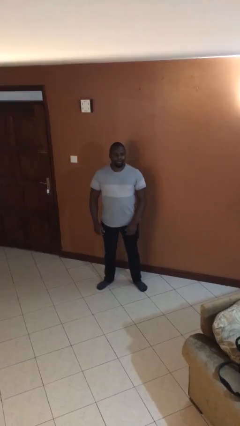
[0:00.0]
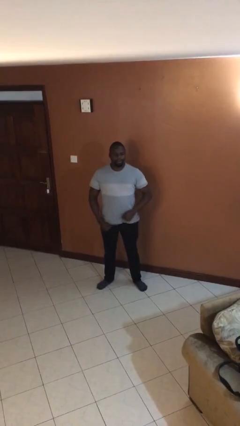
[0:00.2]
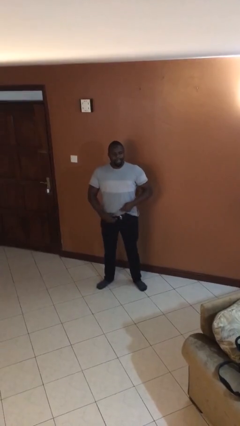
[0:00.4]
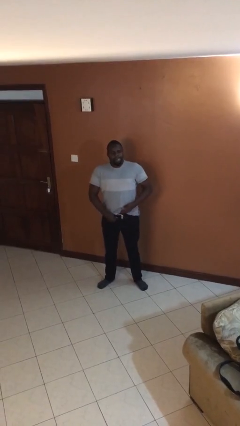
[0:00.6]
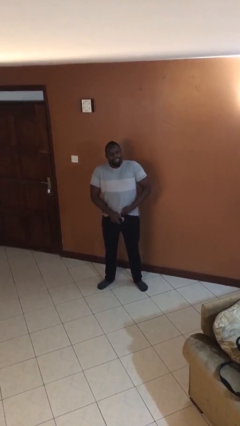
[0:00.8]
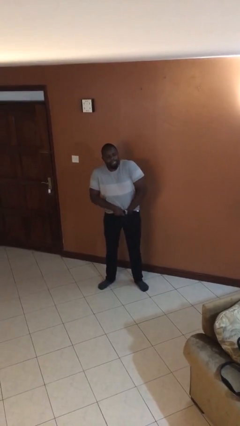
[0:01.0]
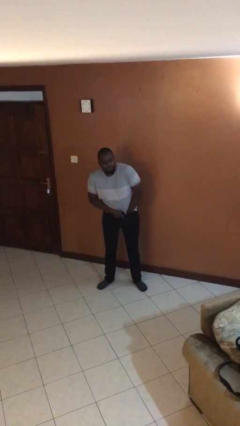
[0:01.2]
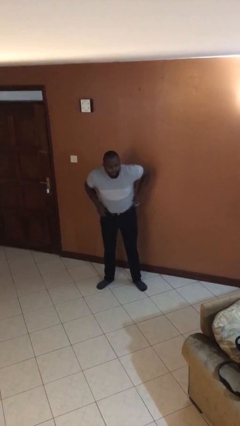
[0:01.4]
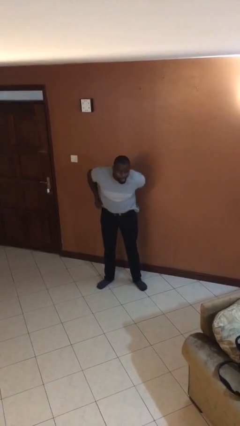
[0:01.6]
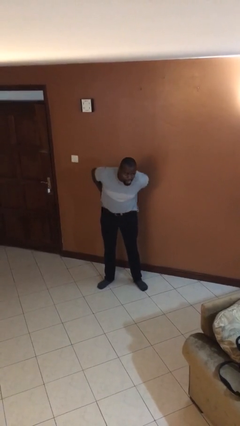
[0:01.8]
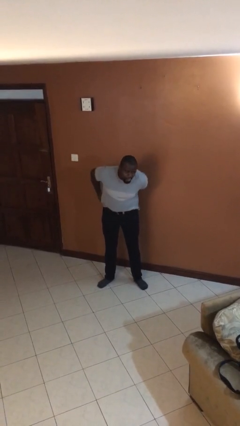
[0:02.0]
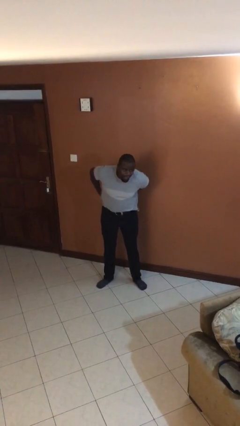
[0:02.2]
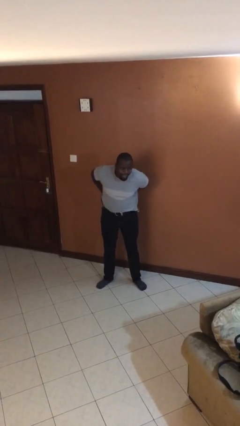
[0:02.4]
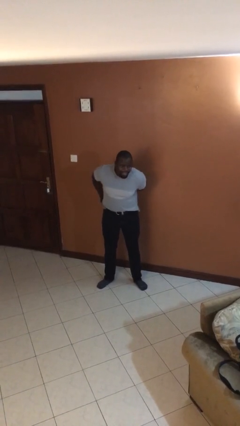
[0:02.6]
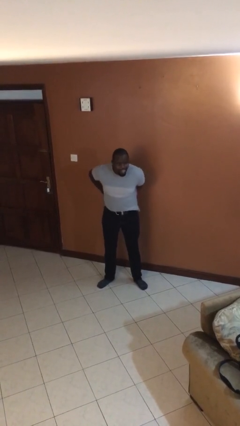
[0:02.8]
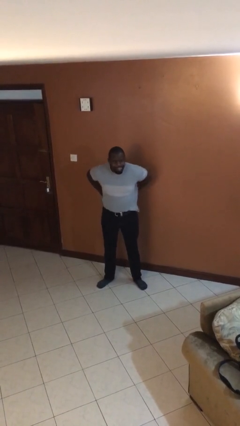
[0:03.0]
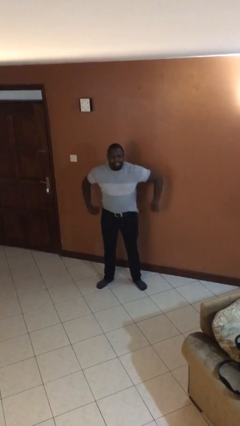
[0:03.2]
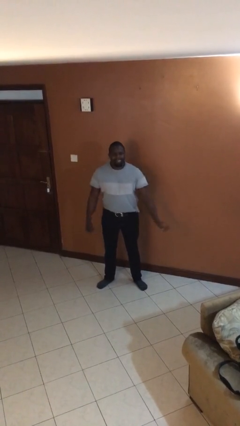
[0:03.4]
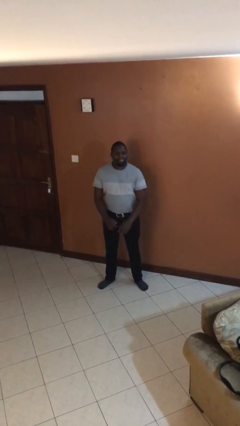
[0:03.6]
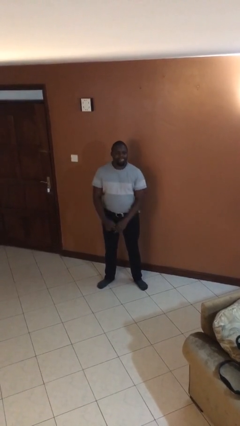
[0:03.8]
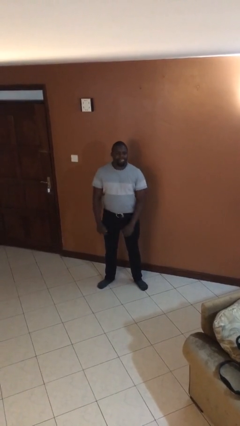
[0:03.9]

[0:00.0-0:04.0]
person tucks in shirt

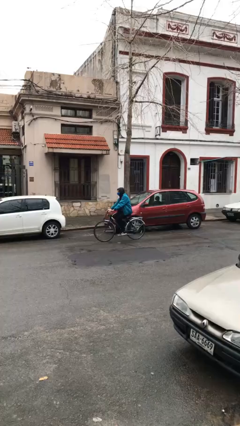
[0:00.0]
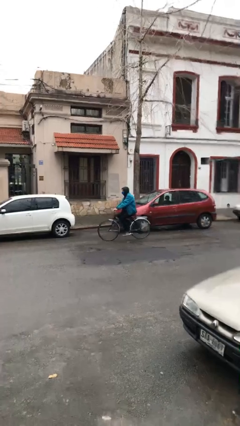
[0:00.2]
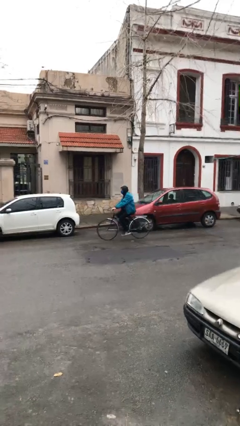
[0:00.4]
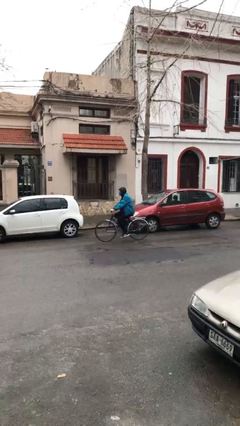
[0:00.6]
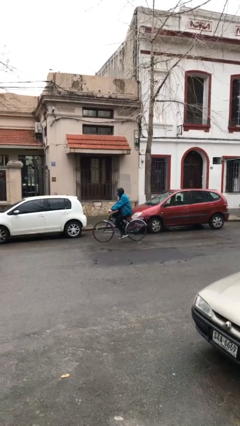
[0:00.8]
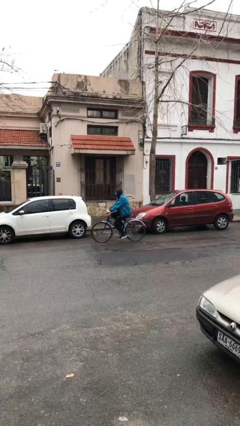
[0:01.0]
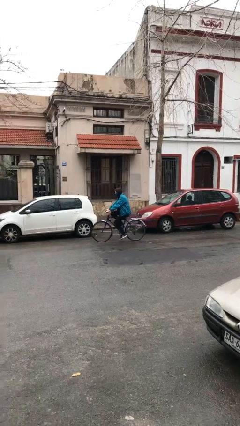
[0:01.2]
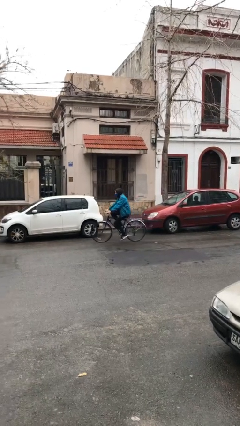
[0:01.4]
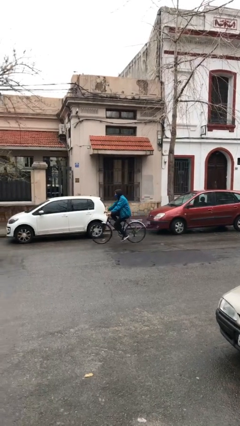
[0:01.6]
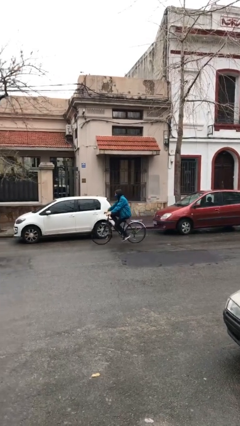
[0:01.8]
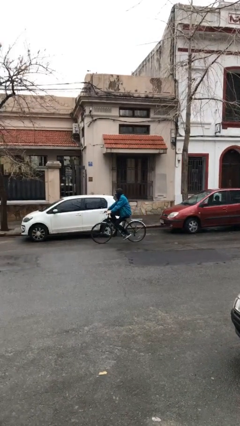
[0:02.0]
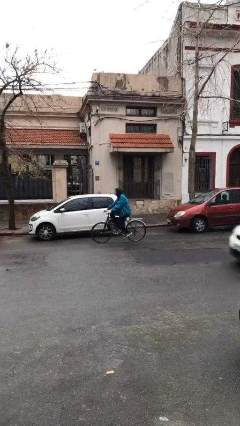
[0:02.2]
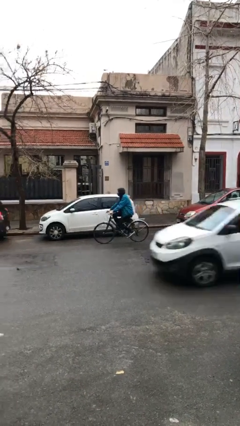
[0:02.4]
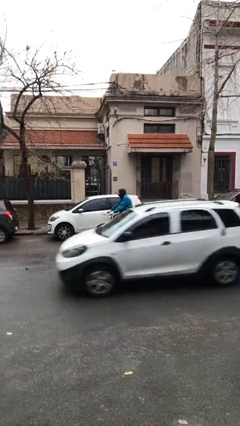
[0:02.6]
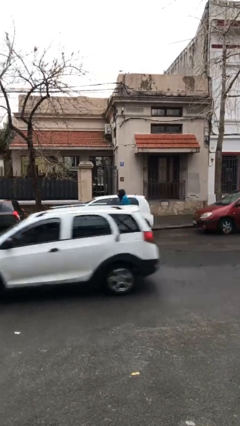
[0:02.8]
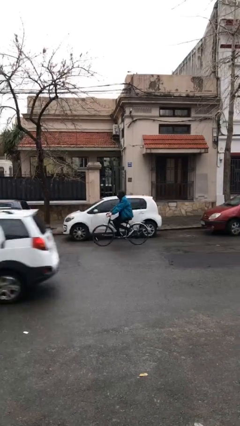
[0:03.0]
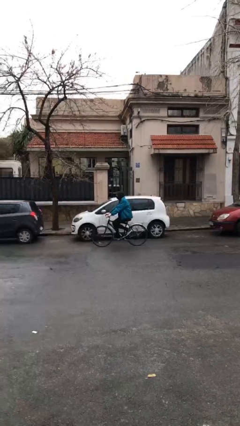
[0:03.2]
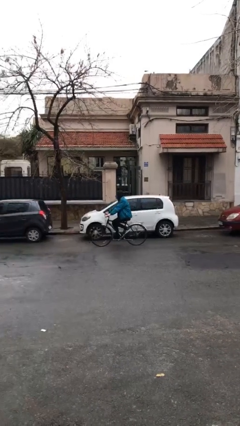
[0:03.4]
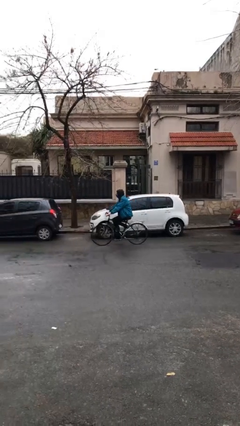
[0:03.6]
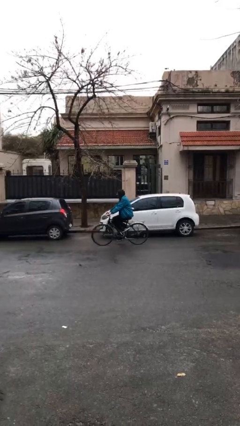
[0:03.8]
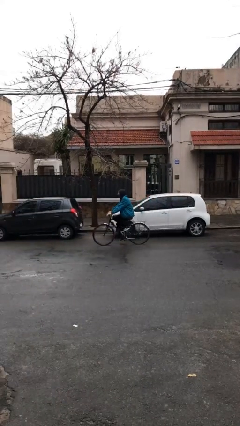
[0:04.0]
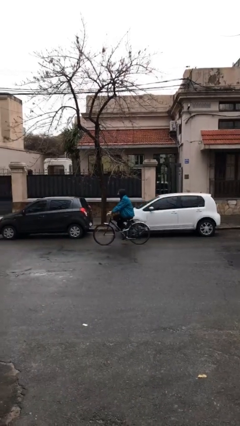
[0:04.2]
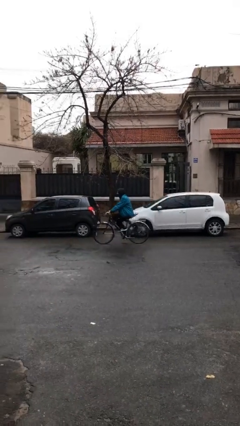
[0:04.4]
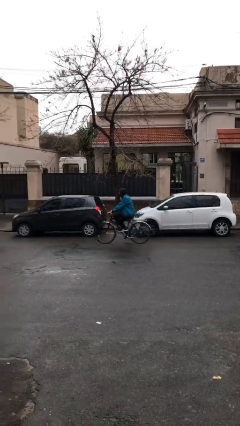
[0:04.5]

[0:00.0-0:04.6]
person rides bicycle

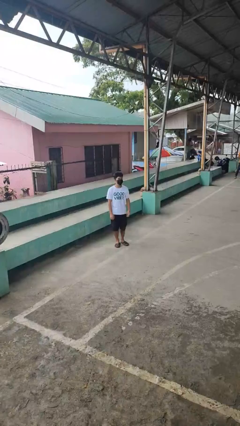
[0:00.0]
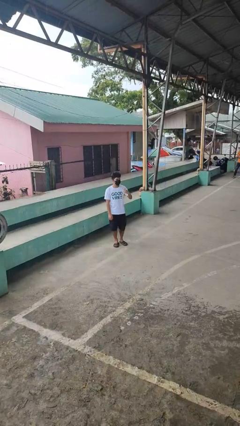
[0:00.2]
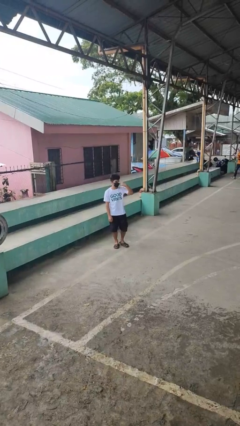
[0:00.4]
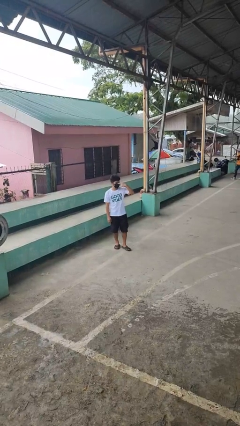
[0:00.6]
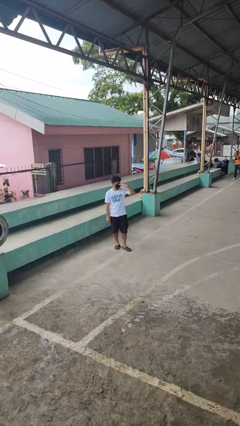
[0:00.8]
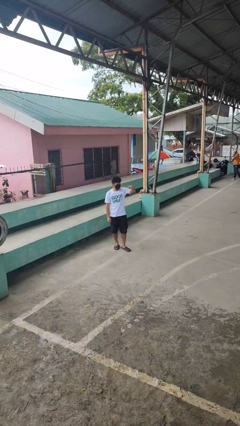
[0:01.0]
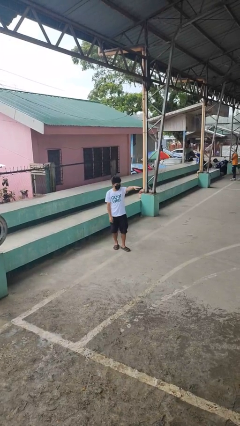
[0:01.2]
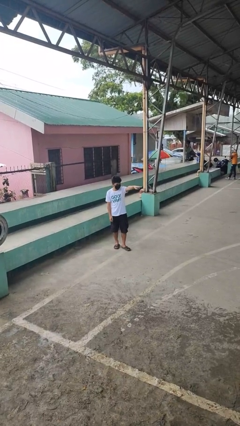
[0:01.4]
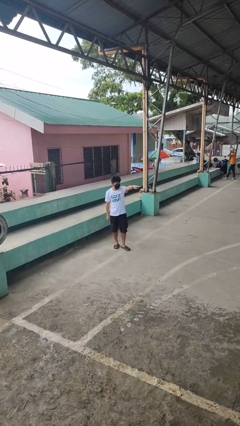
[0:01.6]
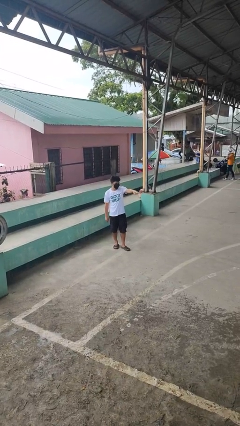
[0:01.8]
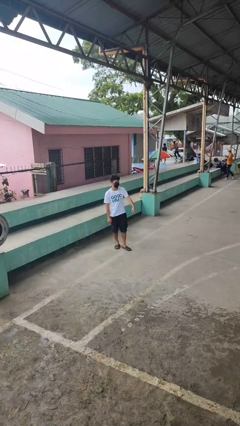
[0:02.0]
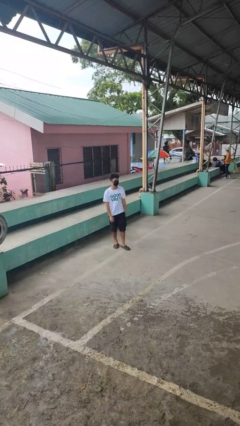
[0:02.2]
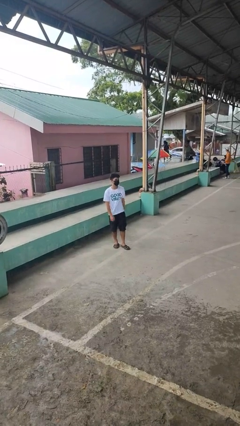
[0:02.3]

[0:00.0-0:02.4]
person gestures watch closely

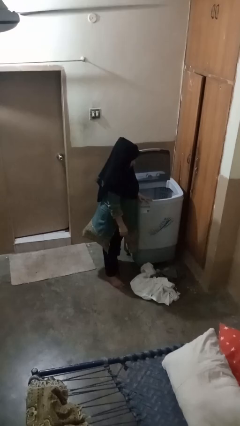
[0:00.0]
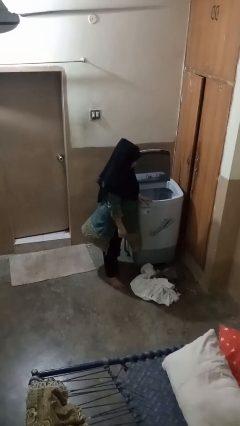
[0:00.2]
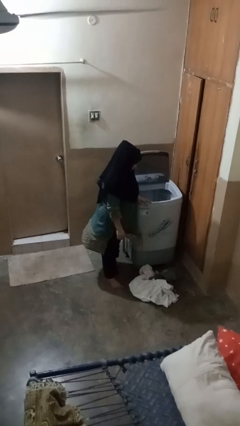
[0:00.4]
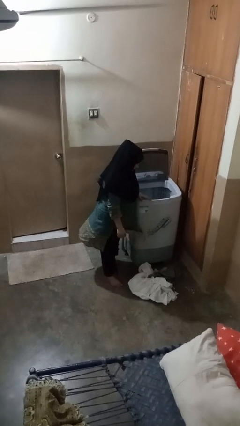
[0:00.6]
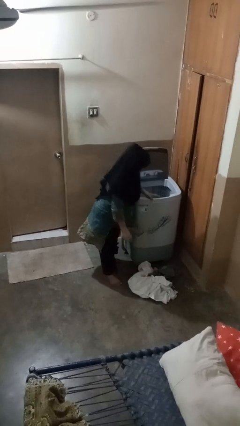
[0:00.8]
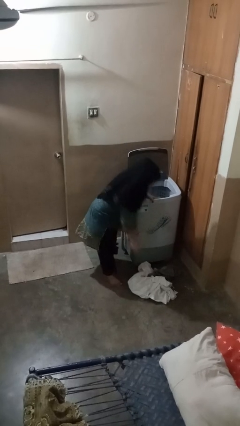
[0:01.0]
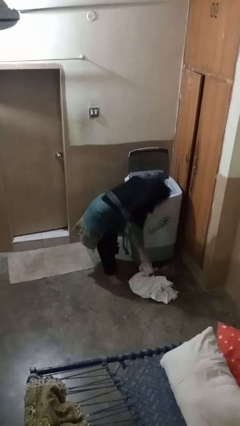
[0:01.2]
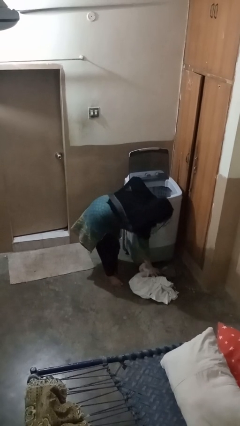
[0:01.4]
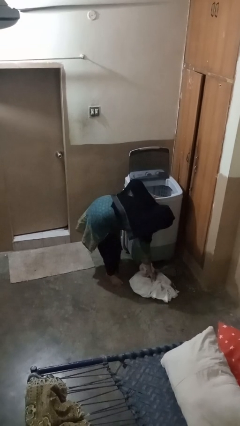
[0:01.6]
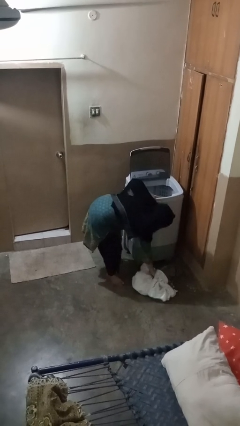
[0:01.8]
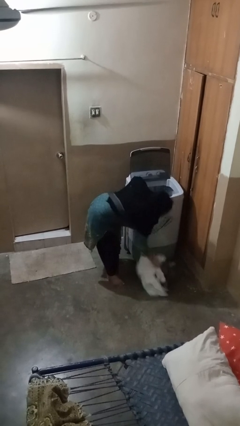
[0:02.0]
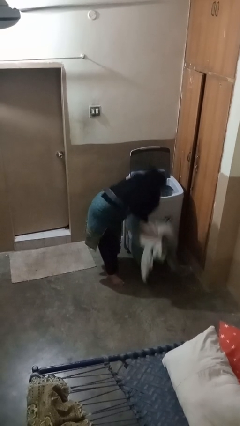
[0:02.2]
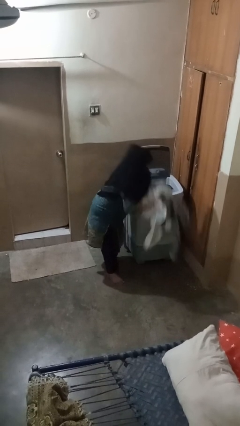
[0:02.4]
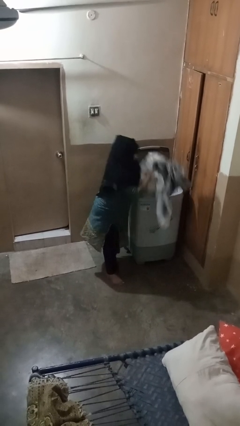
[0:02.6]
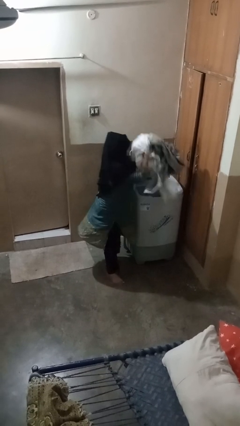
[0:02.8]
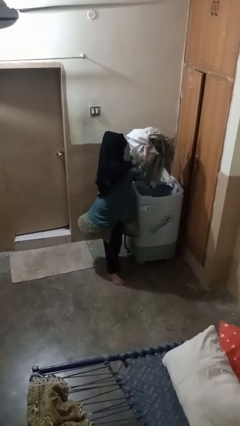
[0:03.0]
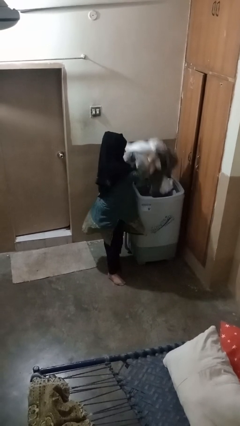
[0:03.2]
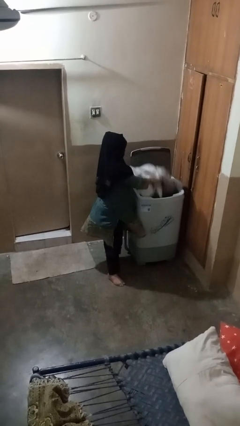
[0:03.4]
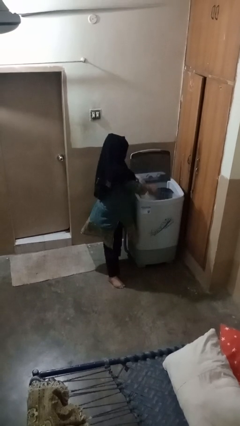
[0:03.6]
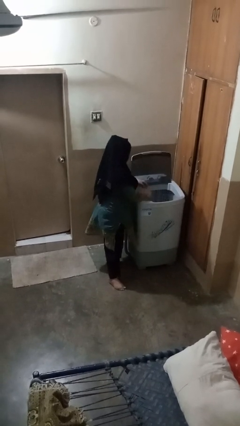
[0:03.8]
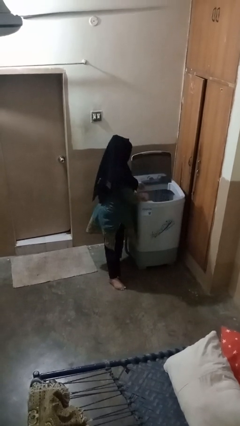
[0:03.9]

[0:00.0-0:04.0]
person loads clotheswasher

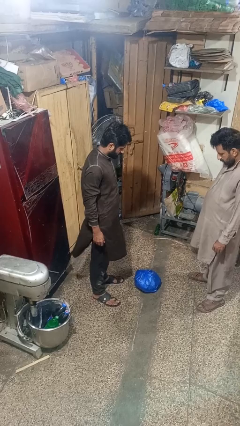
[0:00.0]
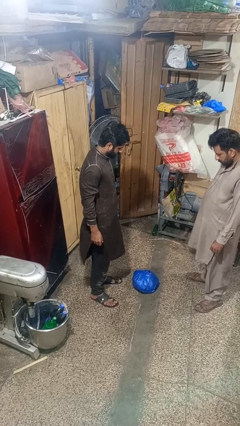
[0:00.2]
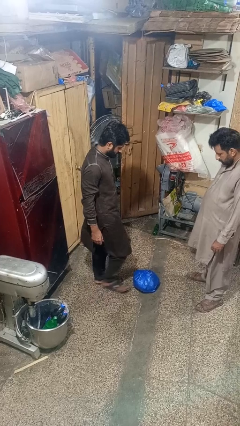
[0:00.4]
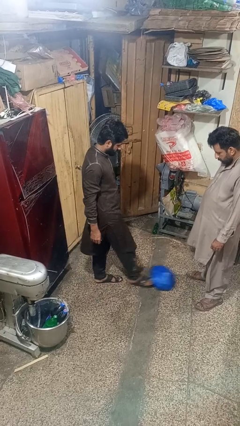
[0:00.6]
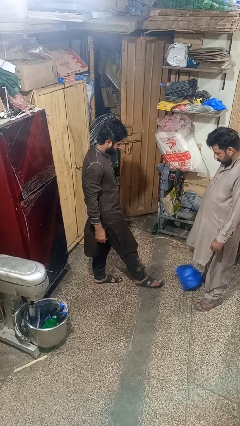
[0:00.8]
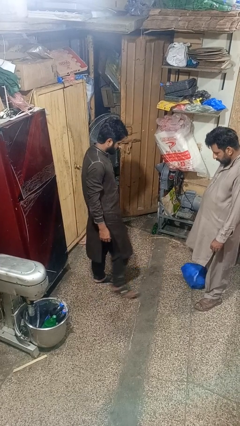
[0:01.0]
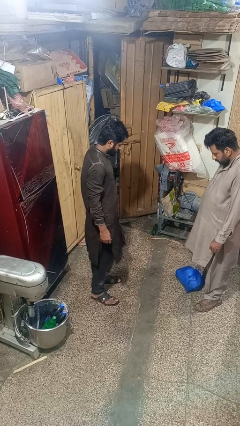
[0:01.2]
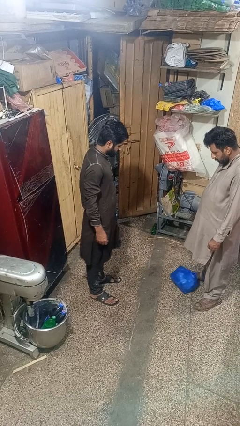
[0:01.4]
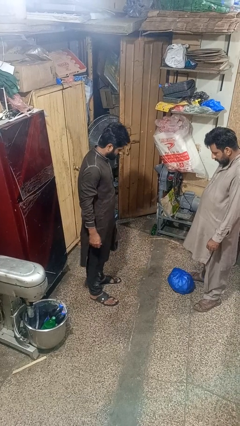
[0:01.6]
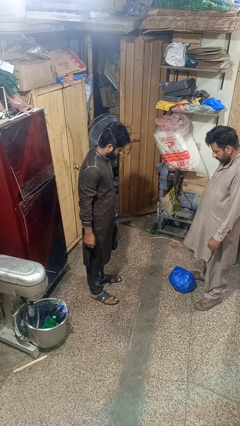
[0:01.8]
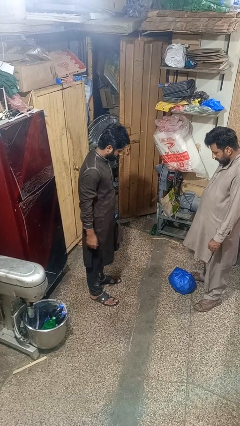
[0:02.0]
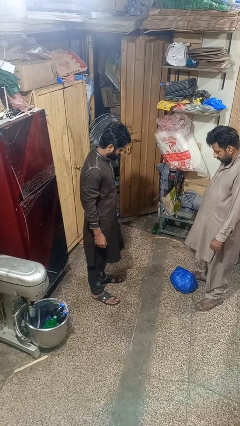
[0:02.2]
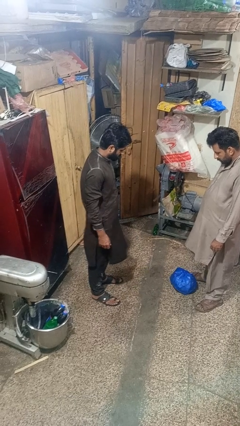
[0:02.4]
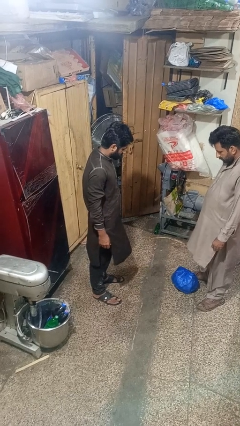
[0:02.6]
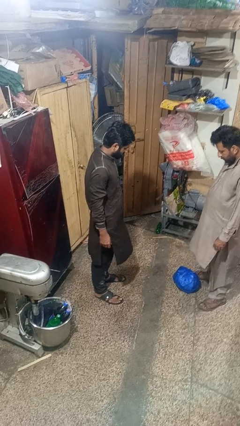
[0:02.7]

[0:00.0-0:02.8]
person kicks object to person
